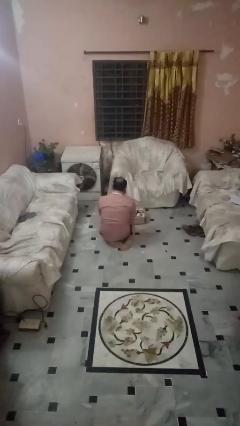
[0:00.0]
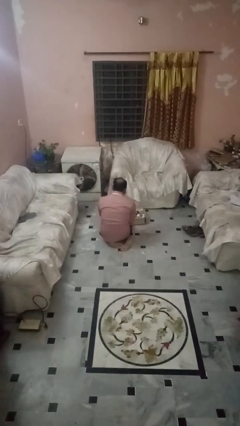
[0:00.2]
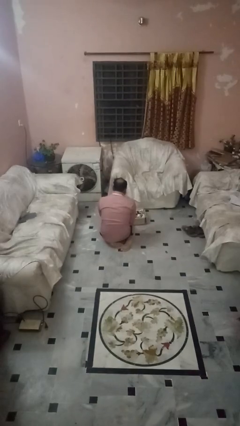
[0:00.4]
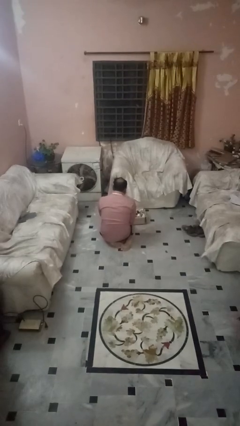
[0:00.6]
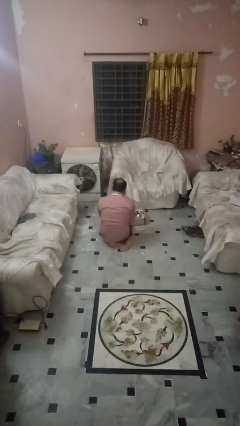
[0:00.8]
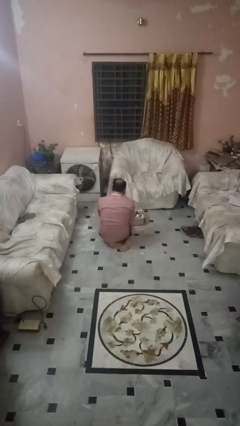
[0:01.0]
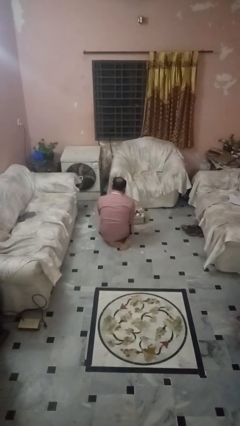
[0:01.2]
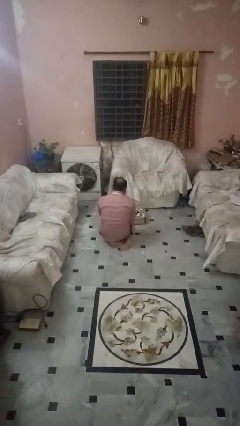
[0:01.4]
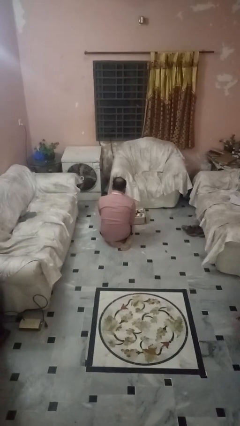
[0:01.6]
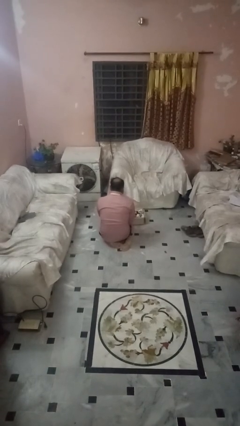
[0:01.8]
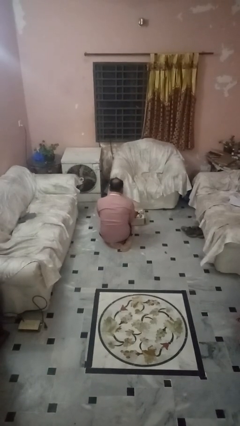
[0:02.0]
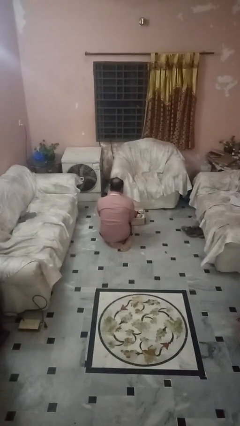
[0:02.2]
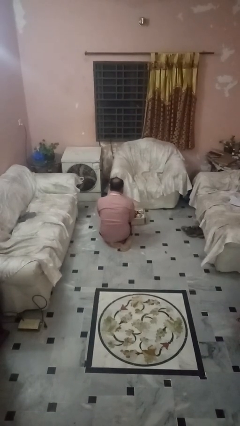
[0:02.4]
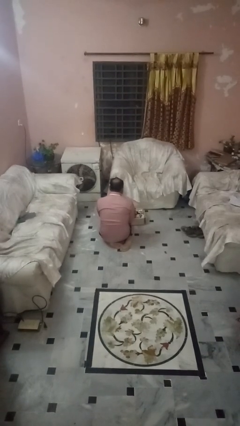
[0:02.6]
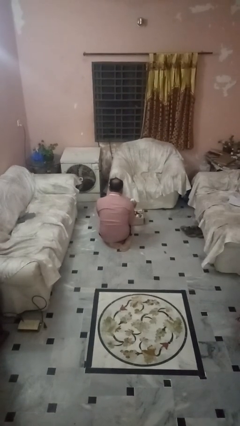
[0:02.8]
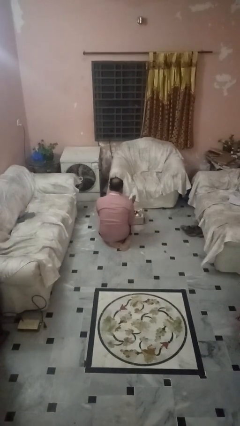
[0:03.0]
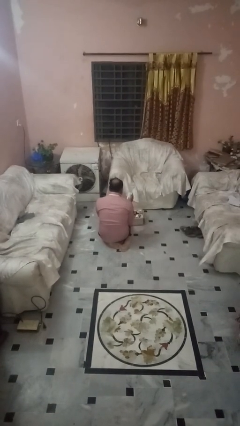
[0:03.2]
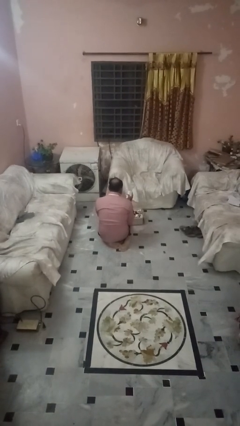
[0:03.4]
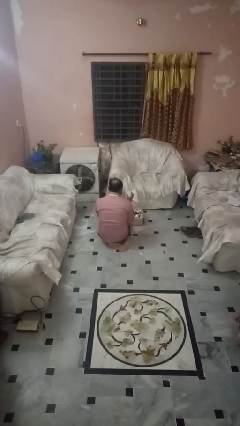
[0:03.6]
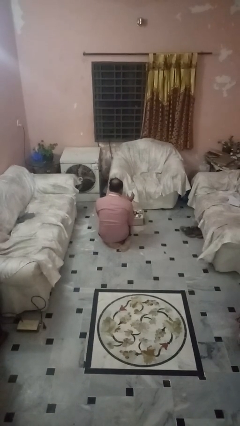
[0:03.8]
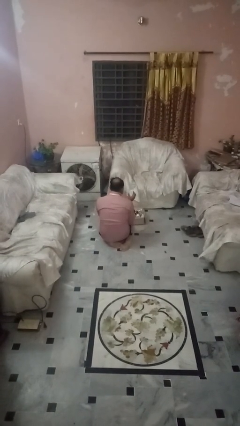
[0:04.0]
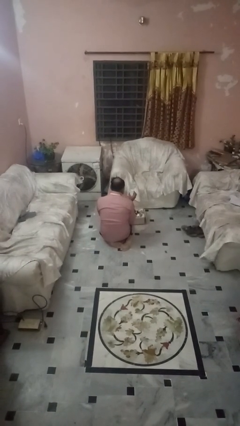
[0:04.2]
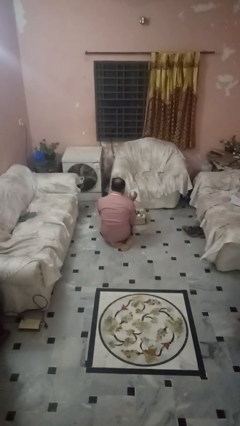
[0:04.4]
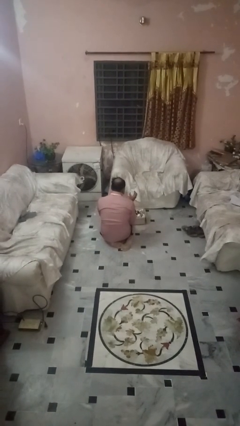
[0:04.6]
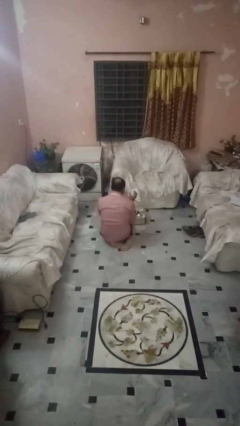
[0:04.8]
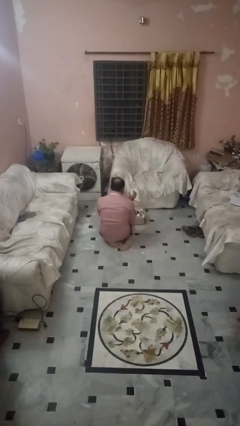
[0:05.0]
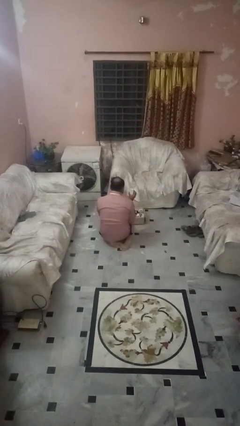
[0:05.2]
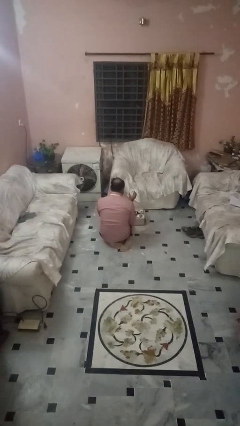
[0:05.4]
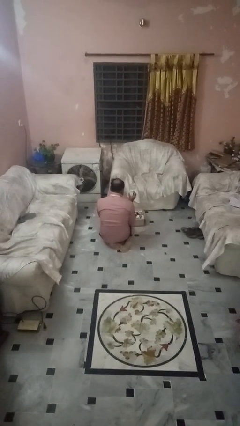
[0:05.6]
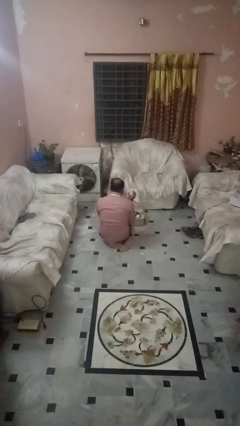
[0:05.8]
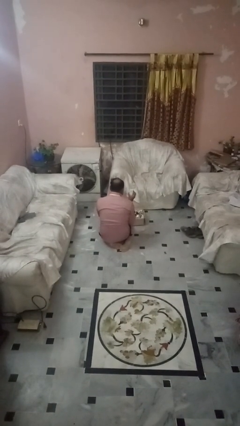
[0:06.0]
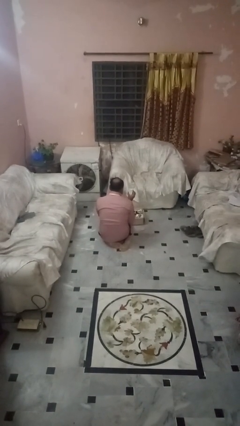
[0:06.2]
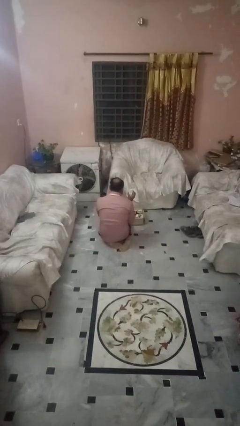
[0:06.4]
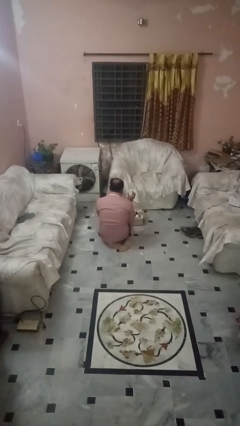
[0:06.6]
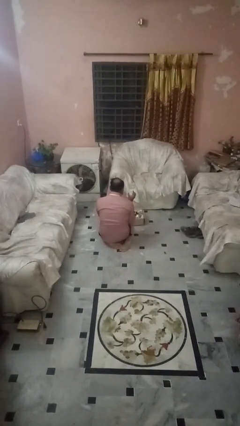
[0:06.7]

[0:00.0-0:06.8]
person takes object from box

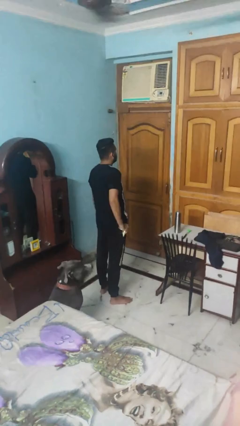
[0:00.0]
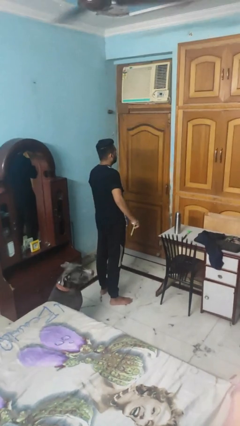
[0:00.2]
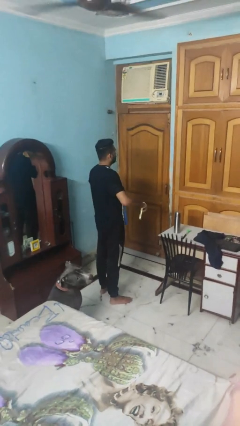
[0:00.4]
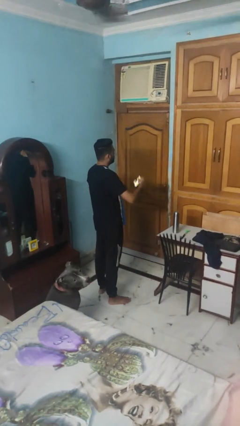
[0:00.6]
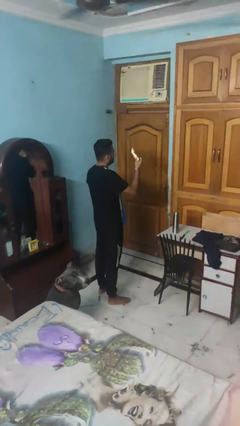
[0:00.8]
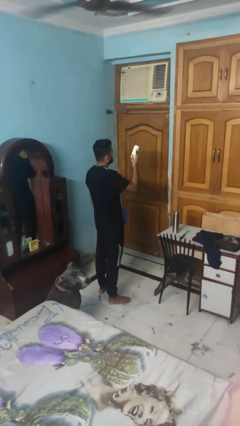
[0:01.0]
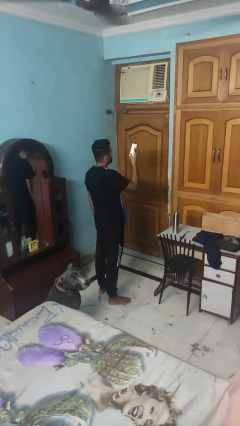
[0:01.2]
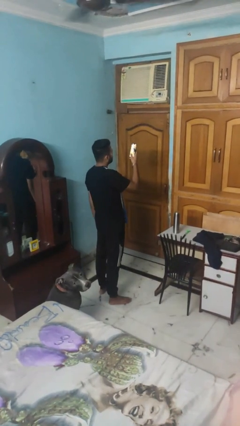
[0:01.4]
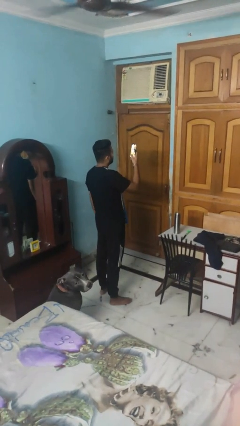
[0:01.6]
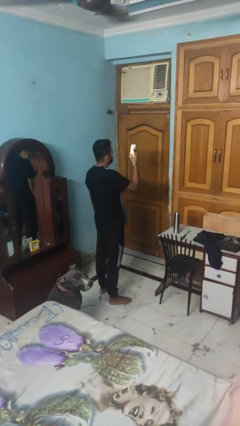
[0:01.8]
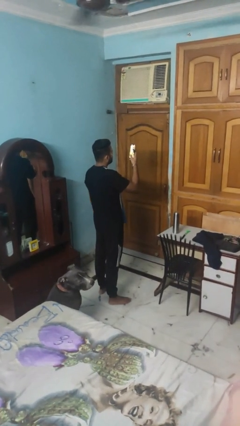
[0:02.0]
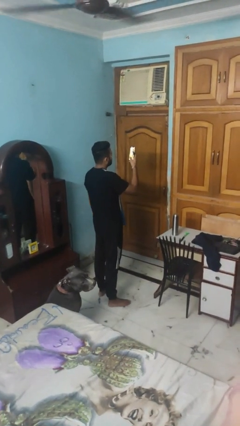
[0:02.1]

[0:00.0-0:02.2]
person takes phone from pocket

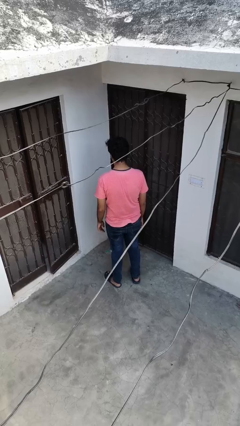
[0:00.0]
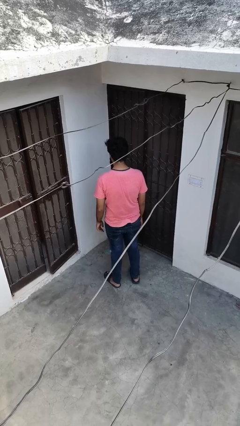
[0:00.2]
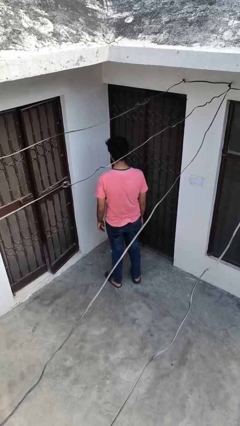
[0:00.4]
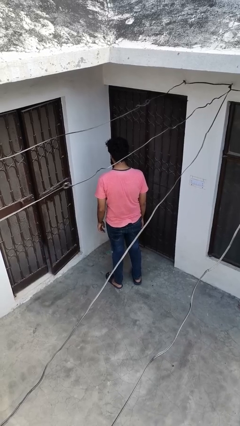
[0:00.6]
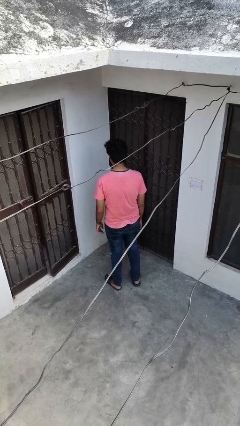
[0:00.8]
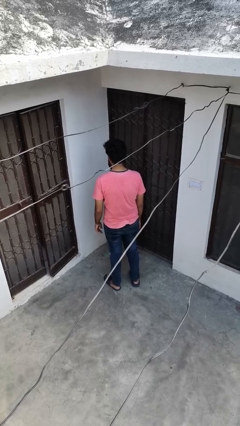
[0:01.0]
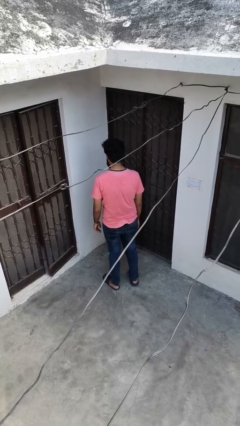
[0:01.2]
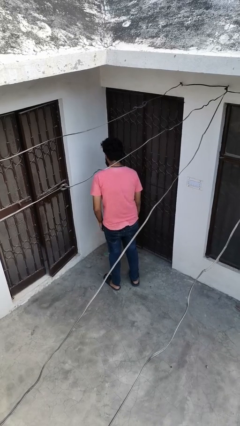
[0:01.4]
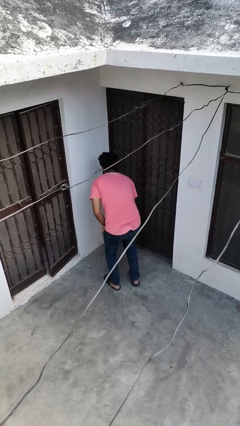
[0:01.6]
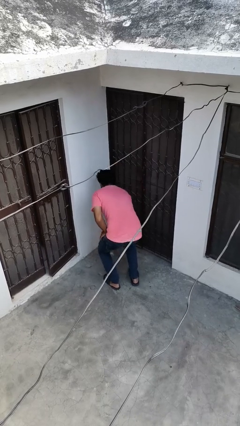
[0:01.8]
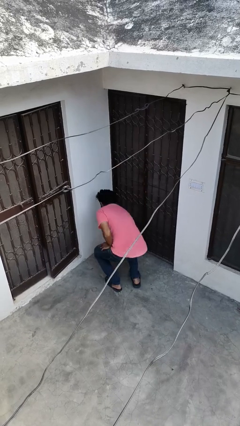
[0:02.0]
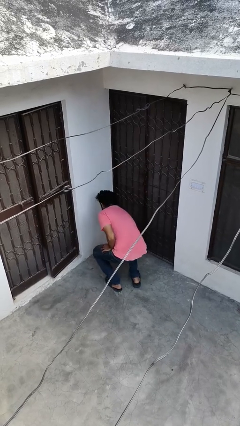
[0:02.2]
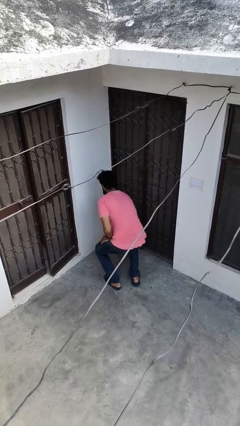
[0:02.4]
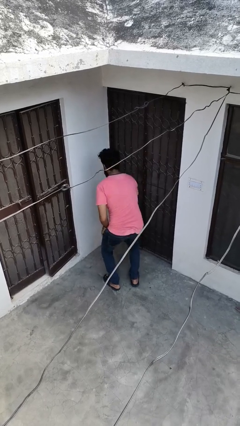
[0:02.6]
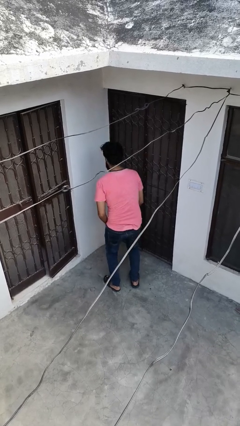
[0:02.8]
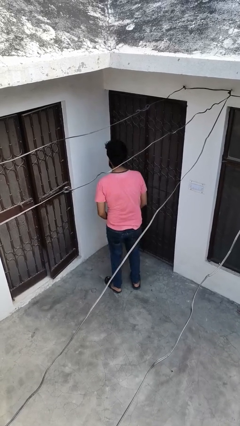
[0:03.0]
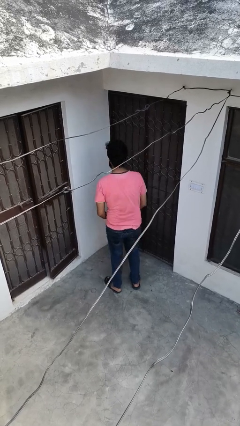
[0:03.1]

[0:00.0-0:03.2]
person picks up object from floor

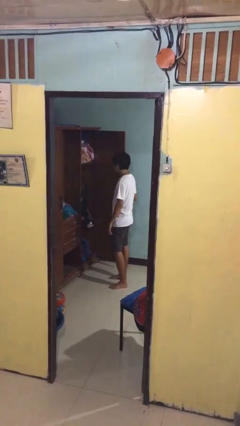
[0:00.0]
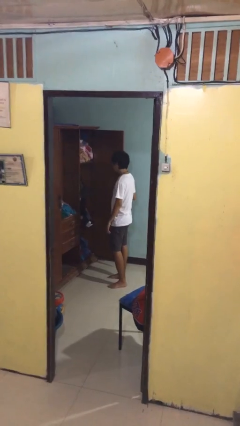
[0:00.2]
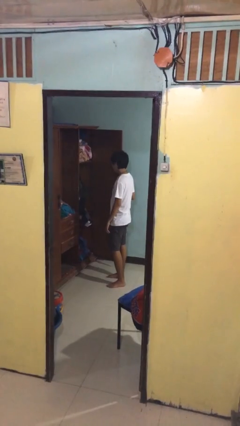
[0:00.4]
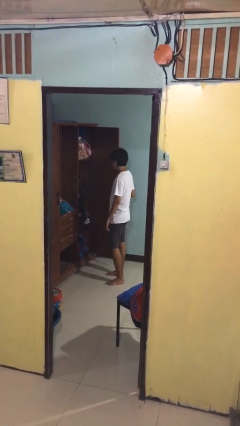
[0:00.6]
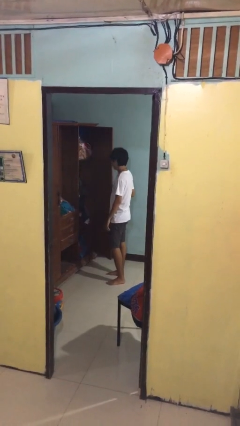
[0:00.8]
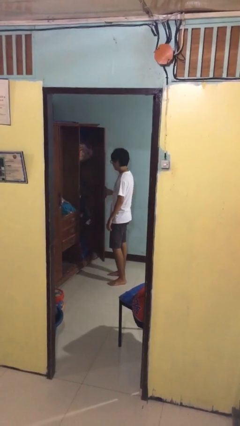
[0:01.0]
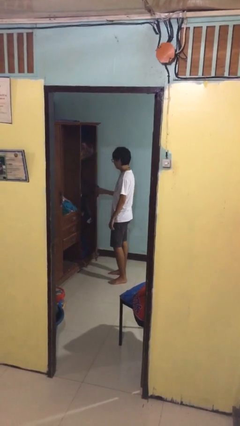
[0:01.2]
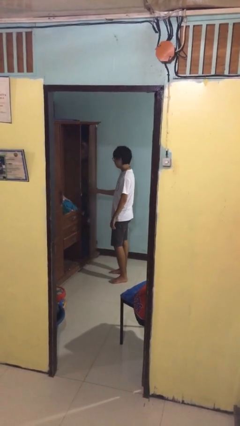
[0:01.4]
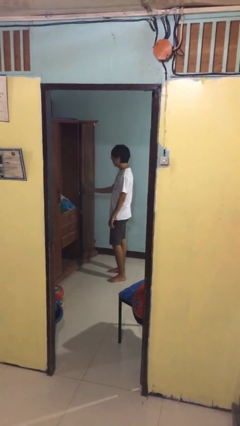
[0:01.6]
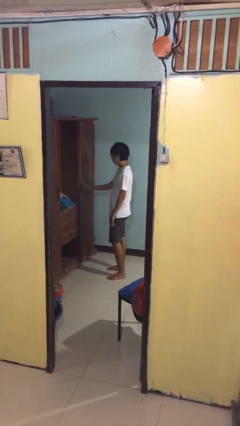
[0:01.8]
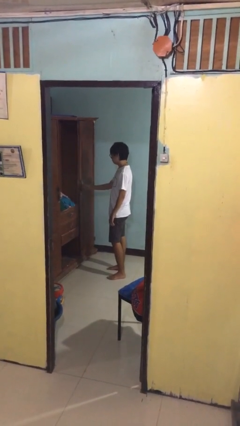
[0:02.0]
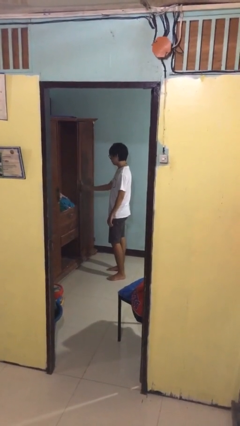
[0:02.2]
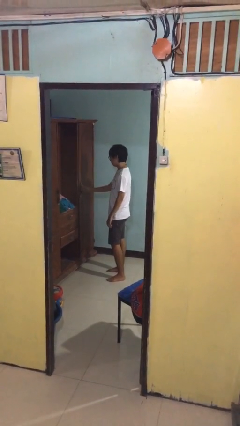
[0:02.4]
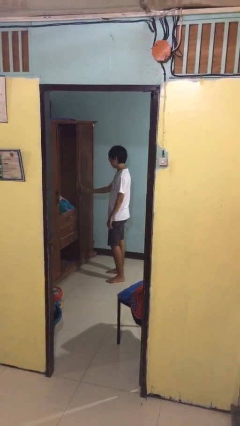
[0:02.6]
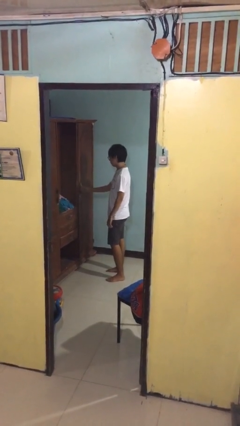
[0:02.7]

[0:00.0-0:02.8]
person closes closet door

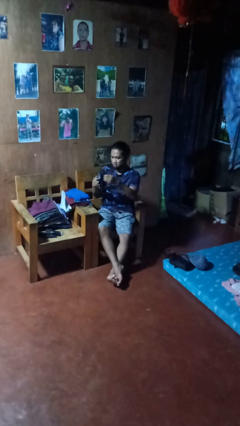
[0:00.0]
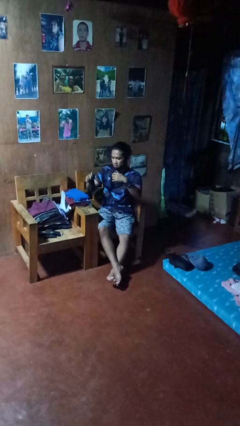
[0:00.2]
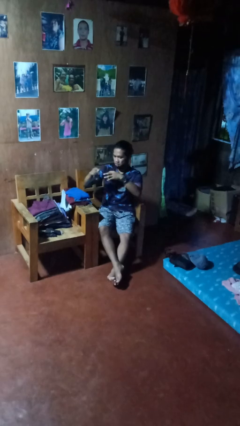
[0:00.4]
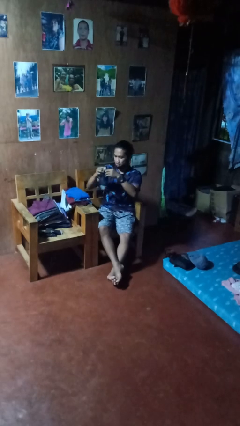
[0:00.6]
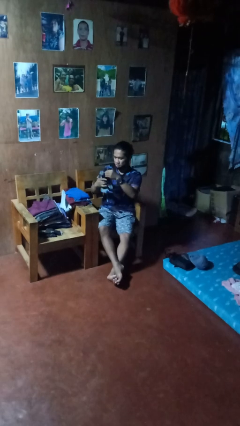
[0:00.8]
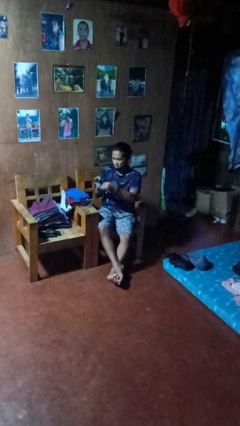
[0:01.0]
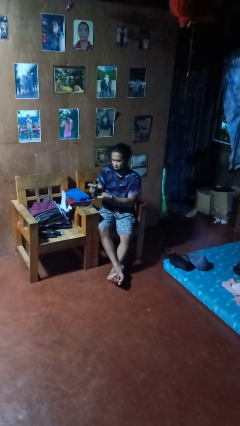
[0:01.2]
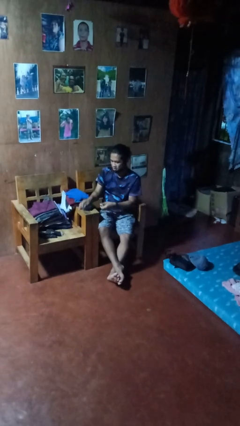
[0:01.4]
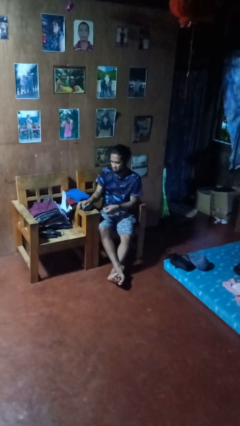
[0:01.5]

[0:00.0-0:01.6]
person folds socks

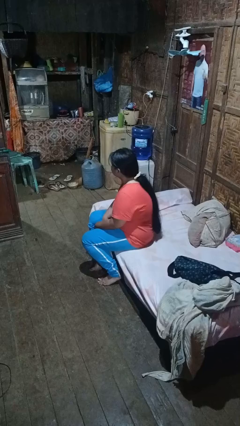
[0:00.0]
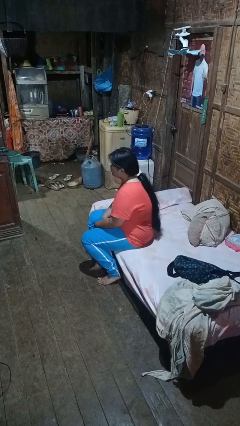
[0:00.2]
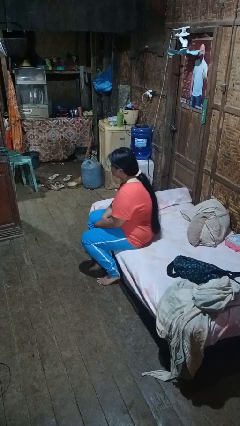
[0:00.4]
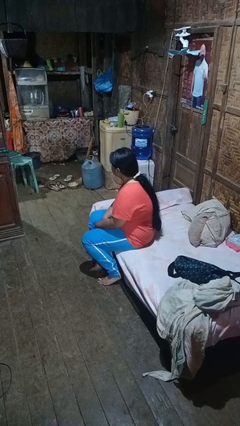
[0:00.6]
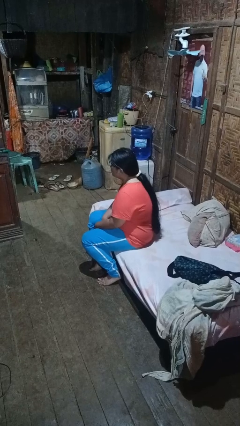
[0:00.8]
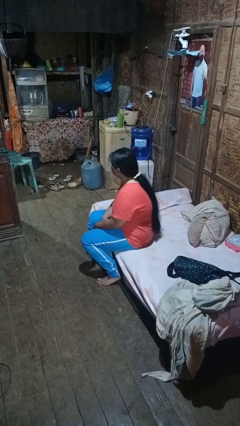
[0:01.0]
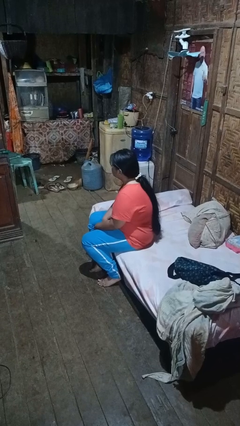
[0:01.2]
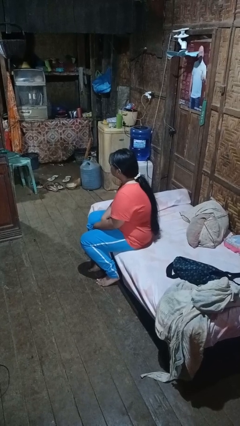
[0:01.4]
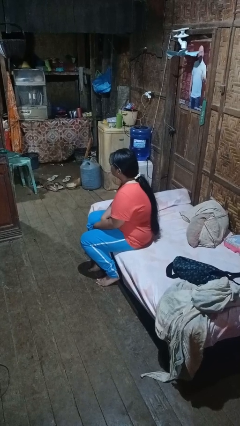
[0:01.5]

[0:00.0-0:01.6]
person shakes head
